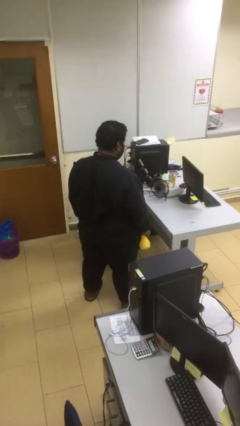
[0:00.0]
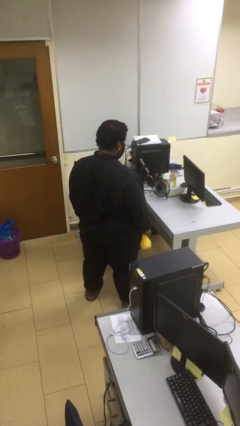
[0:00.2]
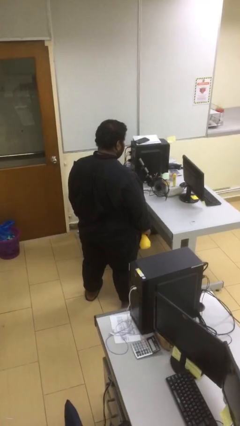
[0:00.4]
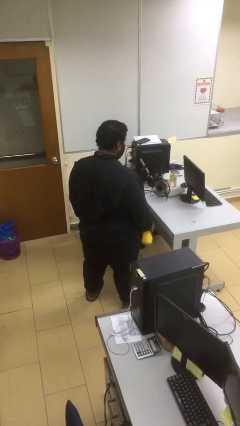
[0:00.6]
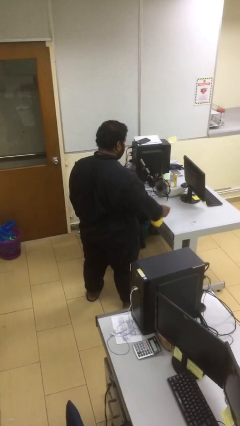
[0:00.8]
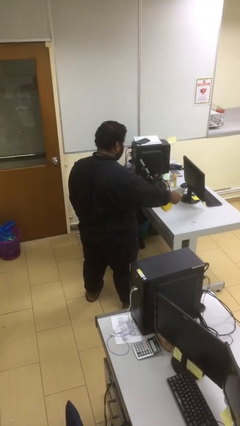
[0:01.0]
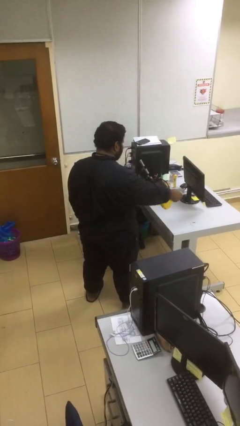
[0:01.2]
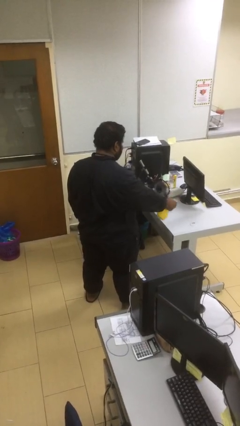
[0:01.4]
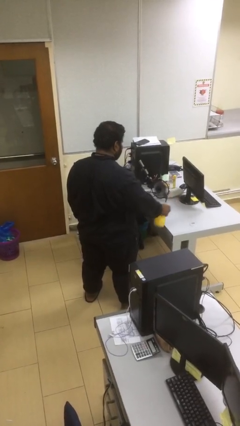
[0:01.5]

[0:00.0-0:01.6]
person sprays from bottle

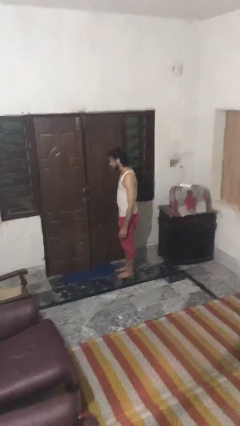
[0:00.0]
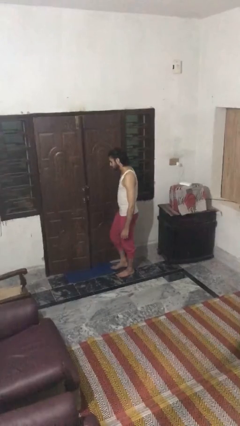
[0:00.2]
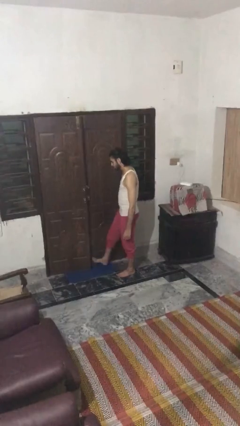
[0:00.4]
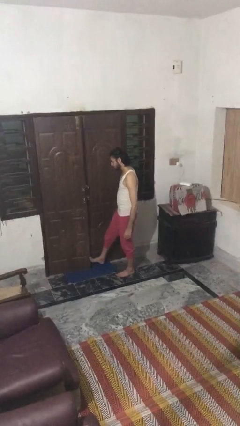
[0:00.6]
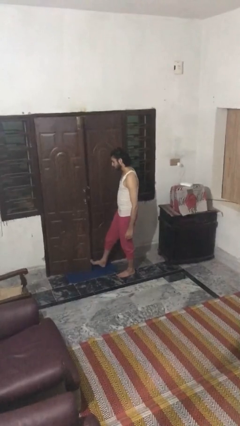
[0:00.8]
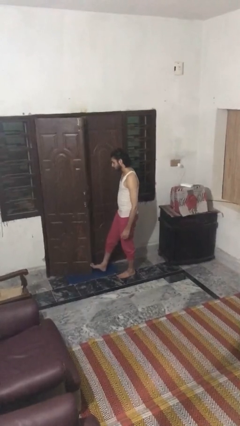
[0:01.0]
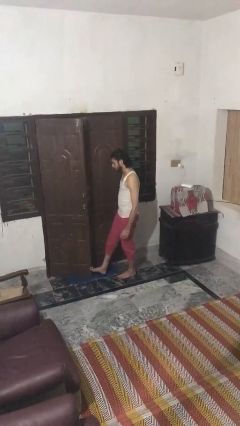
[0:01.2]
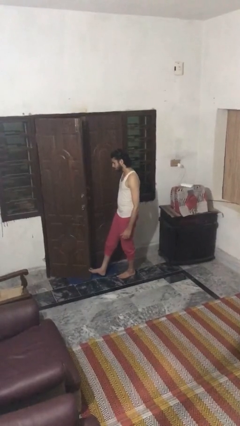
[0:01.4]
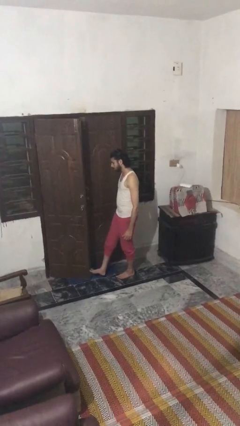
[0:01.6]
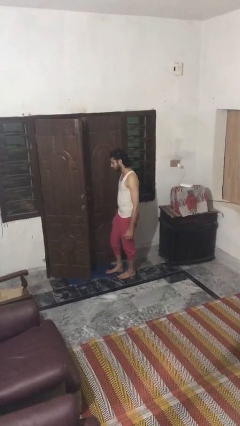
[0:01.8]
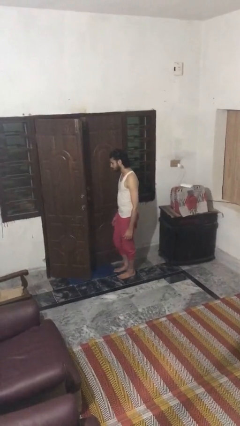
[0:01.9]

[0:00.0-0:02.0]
person opens facility door

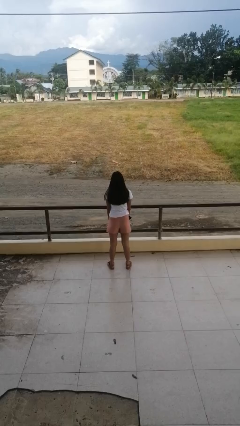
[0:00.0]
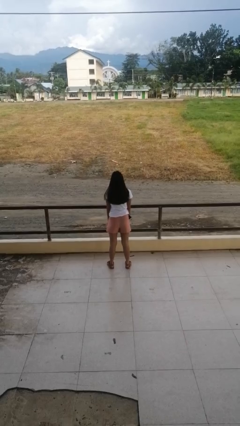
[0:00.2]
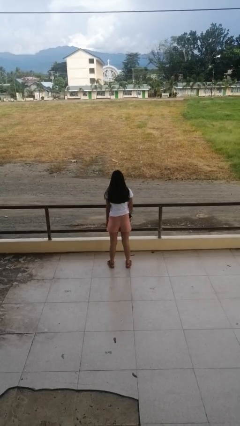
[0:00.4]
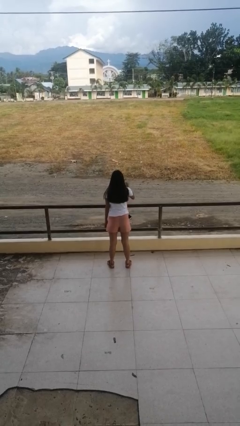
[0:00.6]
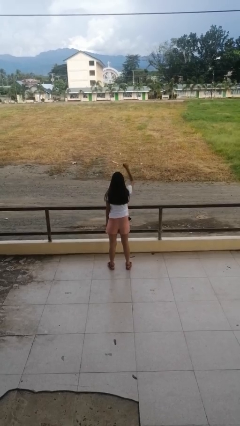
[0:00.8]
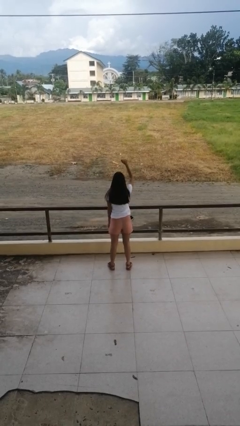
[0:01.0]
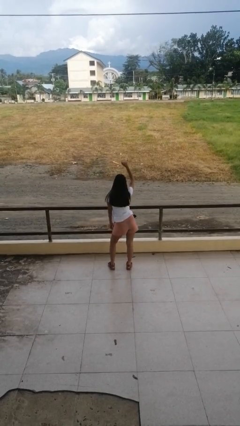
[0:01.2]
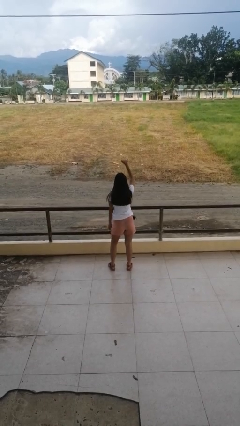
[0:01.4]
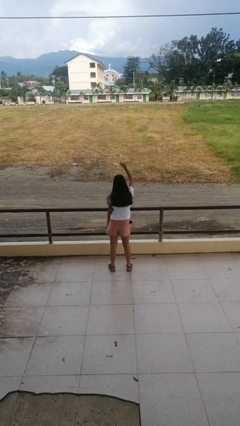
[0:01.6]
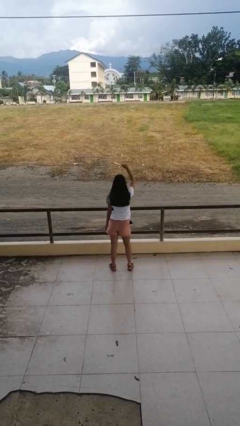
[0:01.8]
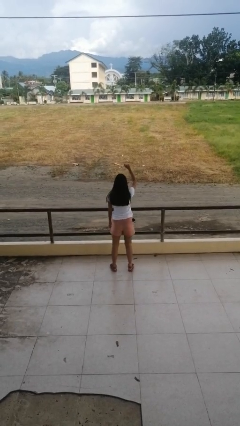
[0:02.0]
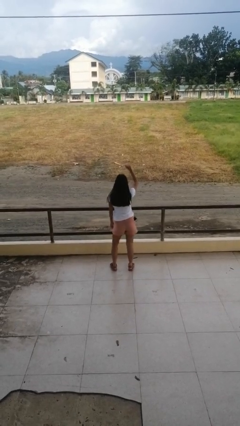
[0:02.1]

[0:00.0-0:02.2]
person dances in place

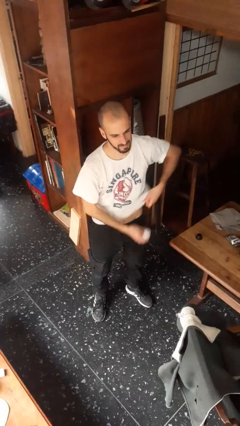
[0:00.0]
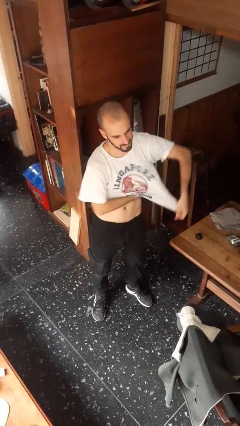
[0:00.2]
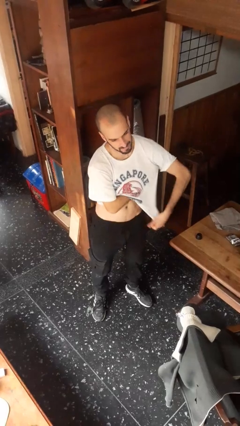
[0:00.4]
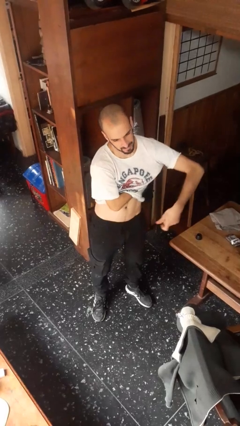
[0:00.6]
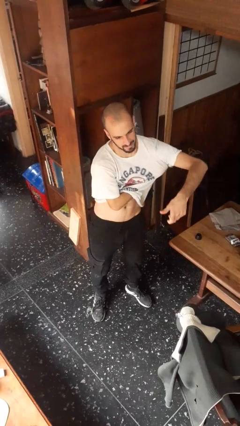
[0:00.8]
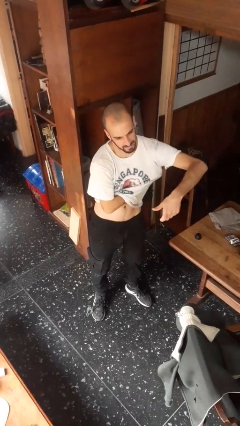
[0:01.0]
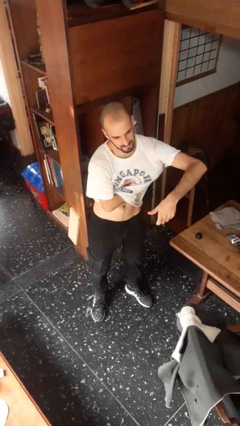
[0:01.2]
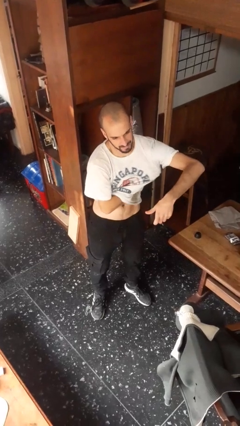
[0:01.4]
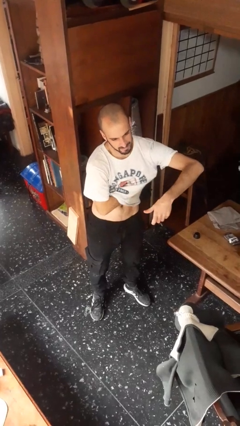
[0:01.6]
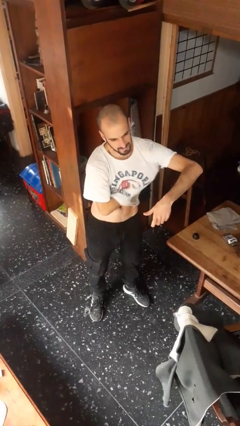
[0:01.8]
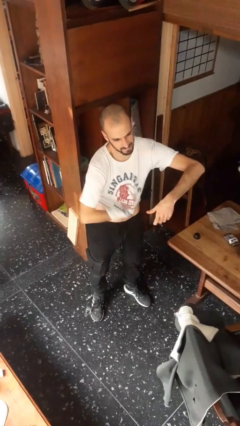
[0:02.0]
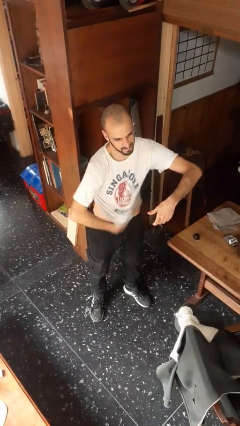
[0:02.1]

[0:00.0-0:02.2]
person applies deodorant

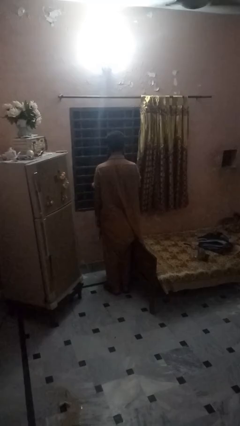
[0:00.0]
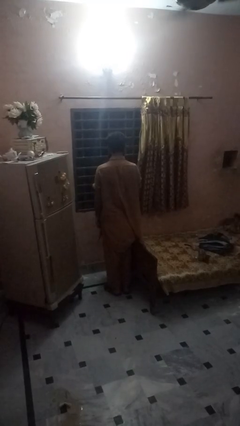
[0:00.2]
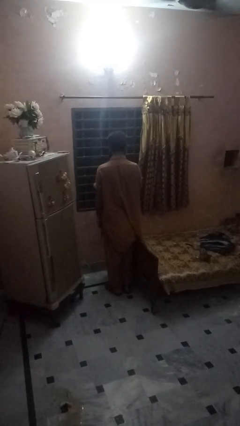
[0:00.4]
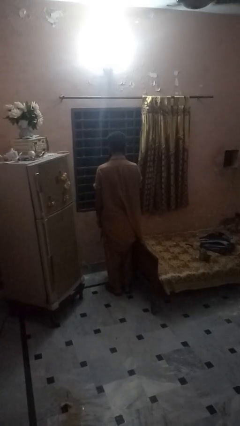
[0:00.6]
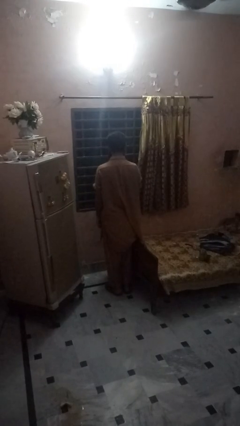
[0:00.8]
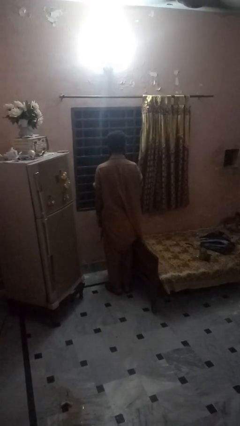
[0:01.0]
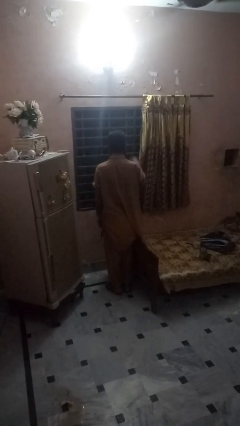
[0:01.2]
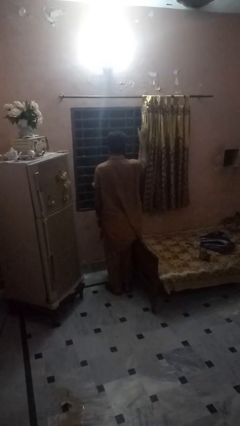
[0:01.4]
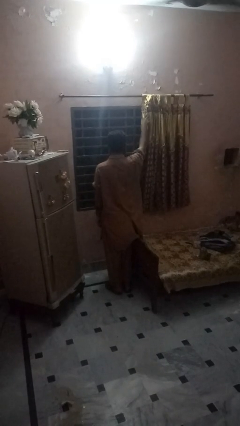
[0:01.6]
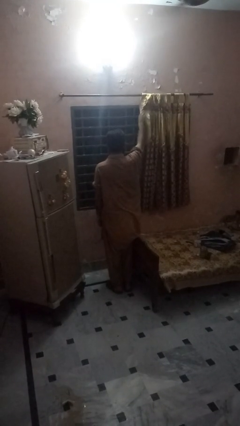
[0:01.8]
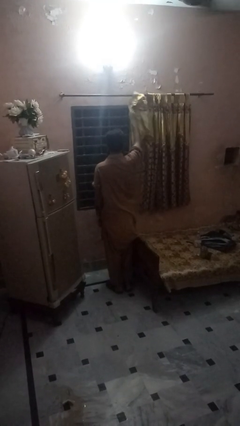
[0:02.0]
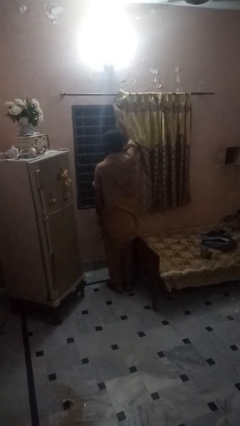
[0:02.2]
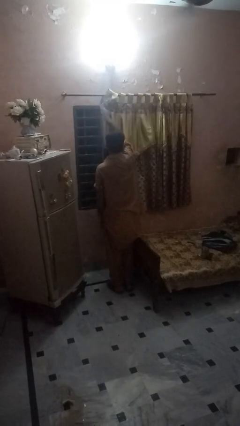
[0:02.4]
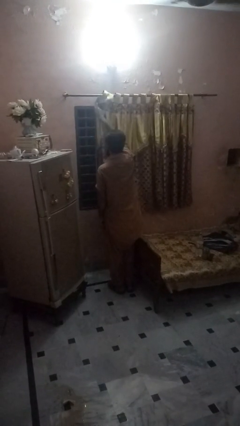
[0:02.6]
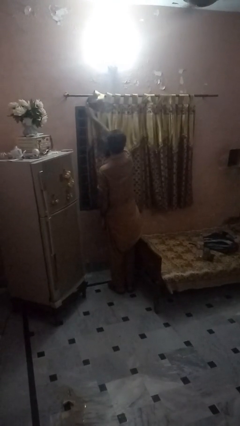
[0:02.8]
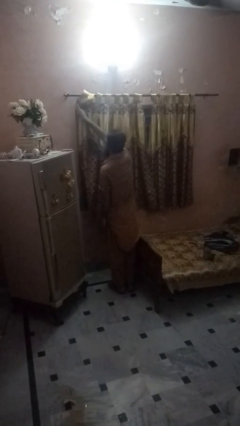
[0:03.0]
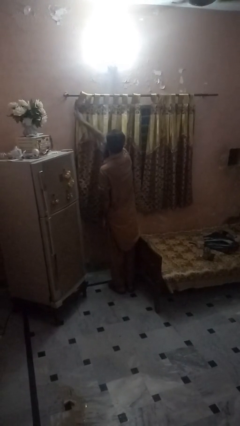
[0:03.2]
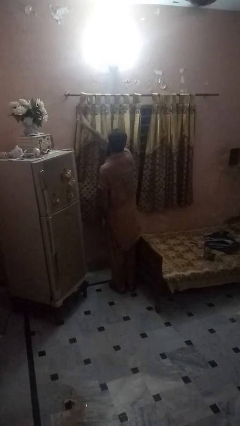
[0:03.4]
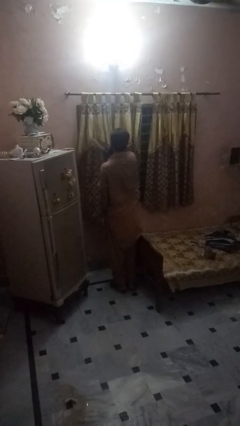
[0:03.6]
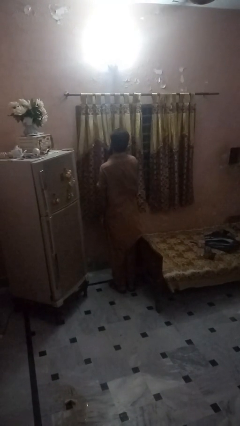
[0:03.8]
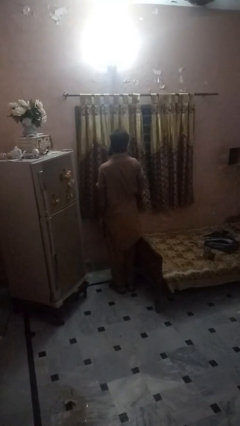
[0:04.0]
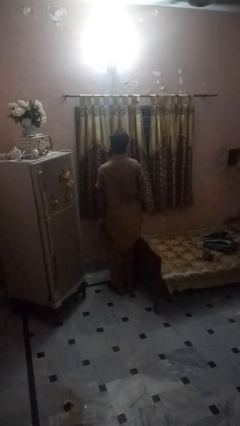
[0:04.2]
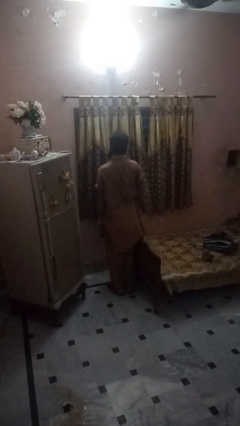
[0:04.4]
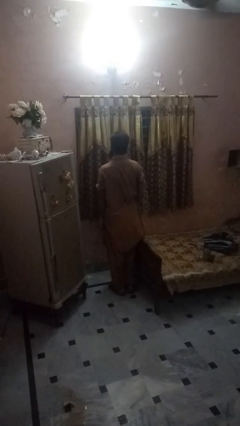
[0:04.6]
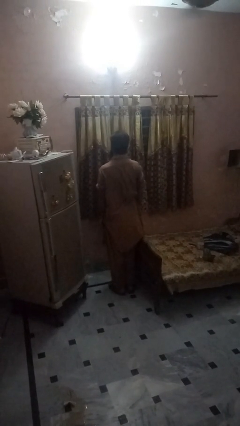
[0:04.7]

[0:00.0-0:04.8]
person closes curtains

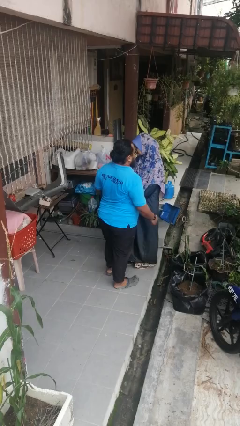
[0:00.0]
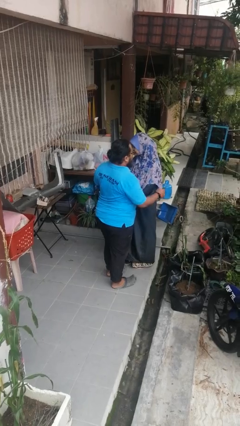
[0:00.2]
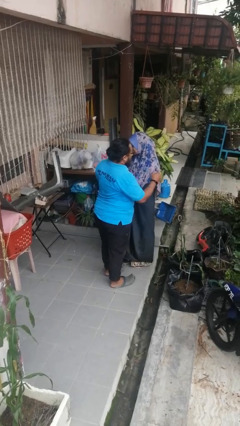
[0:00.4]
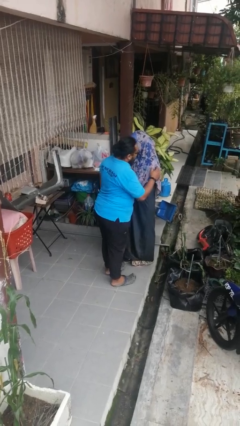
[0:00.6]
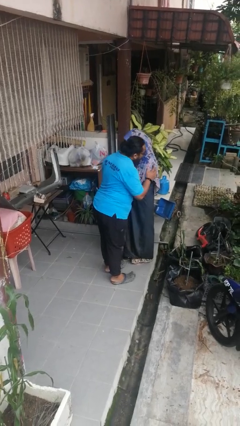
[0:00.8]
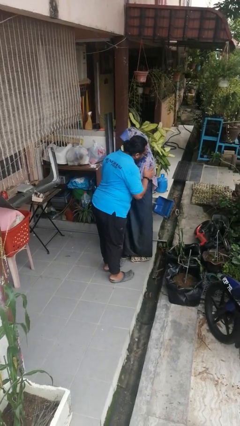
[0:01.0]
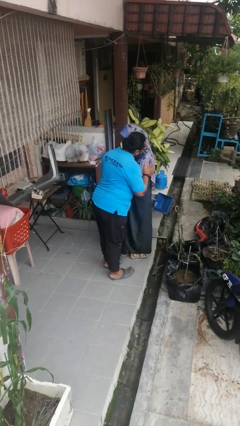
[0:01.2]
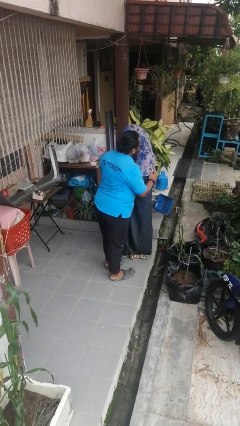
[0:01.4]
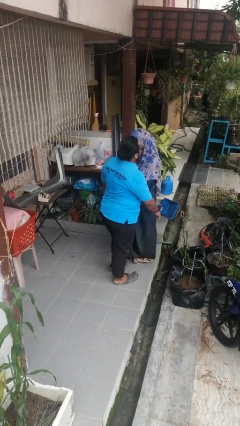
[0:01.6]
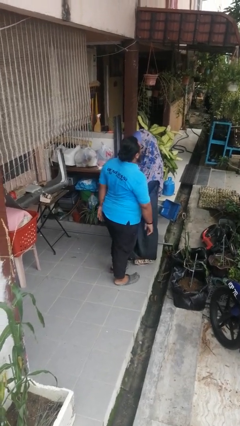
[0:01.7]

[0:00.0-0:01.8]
person kisses cheek of person

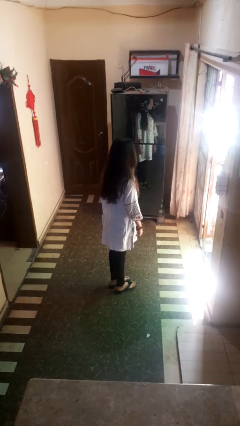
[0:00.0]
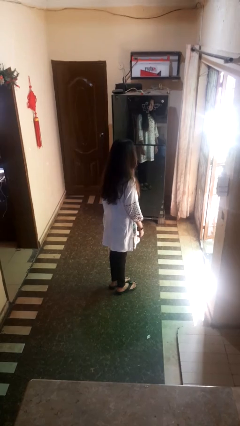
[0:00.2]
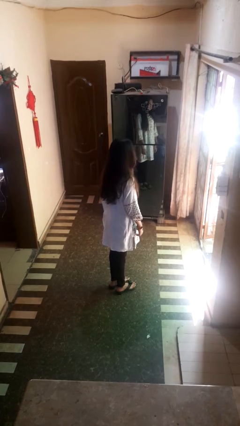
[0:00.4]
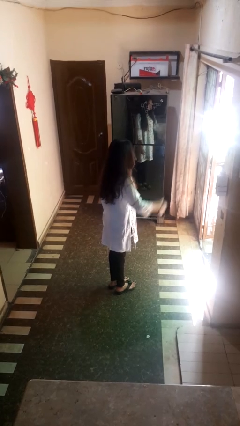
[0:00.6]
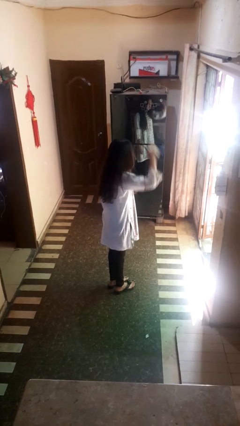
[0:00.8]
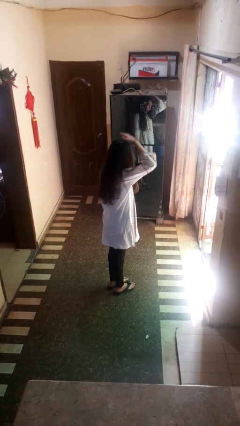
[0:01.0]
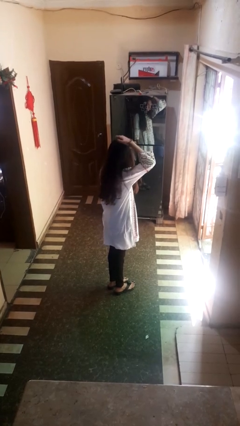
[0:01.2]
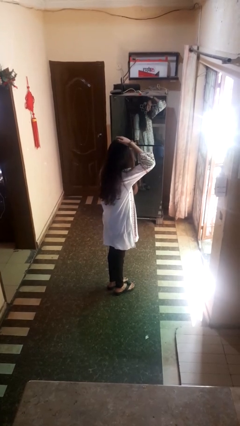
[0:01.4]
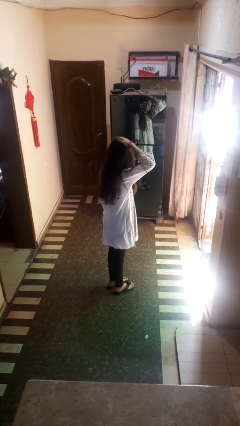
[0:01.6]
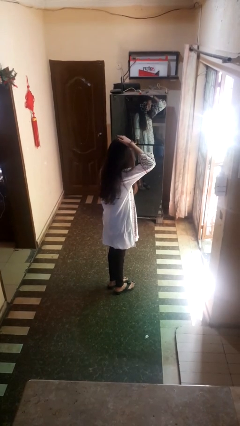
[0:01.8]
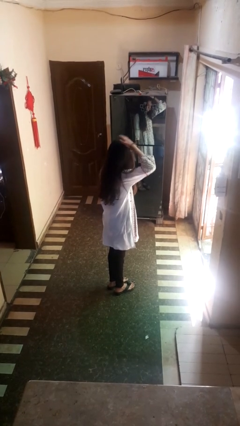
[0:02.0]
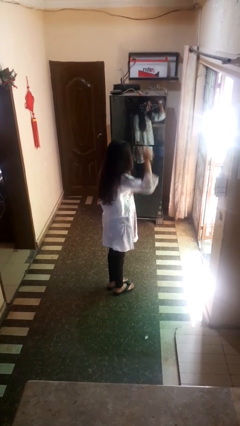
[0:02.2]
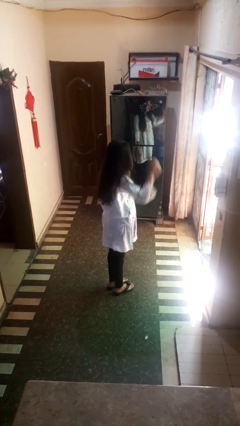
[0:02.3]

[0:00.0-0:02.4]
person pats head
